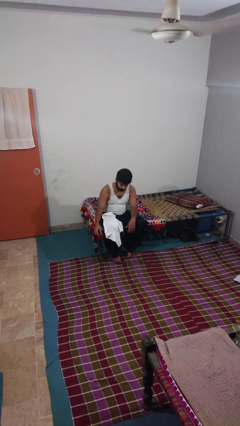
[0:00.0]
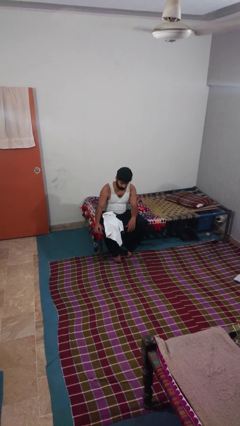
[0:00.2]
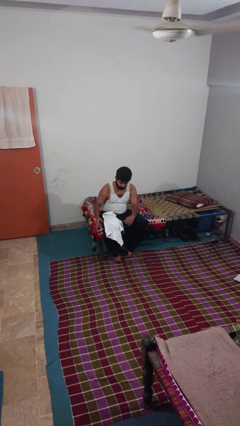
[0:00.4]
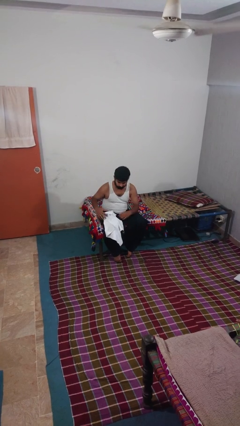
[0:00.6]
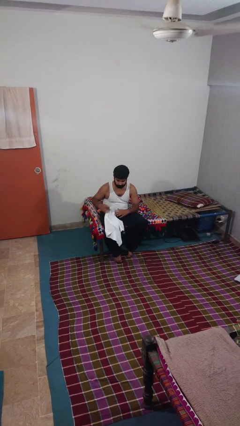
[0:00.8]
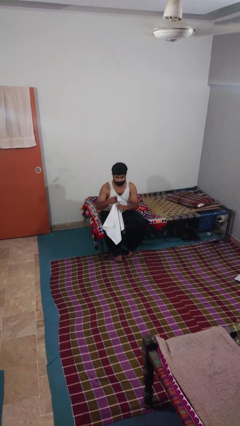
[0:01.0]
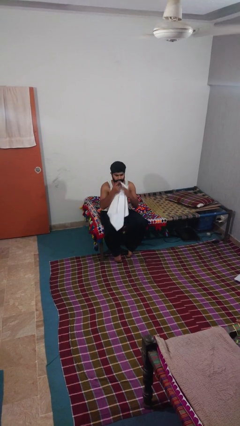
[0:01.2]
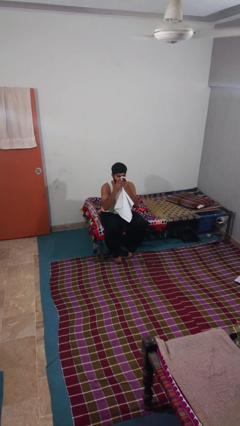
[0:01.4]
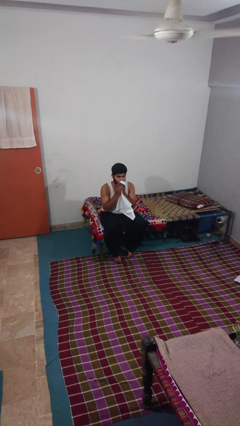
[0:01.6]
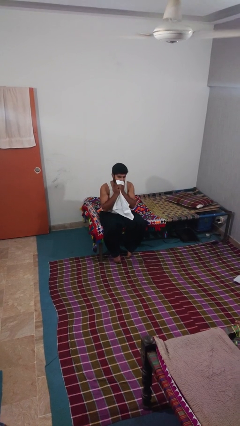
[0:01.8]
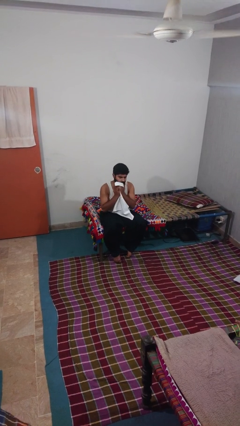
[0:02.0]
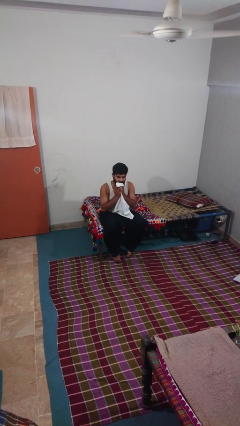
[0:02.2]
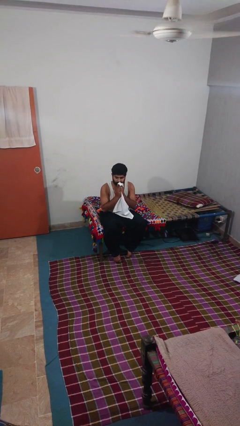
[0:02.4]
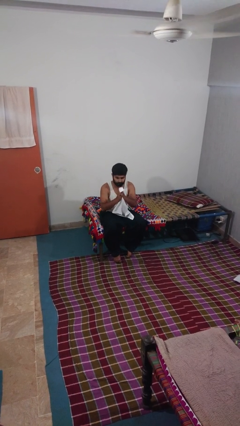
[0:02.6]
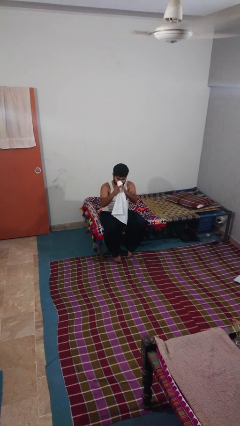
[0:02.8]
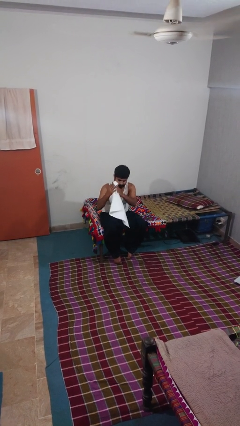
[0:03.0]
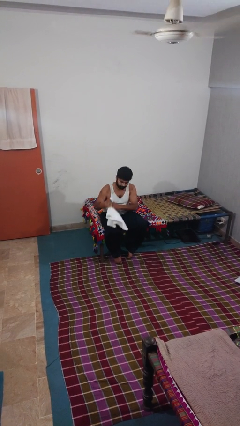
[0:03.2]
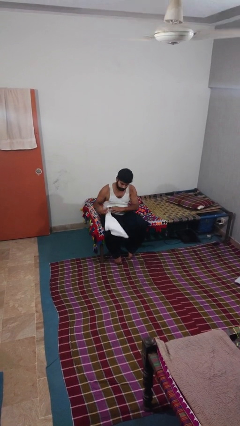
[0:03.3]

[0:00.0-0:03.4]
person wipes mouth with napkin

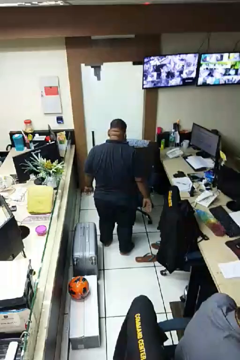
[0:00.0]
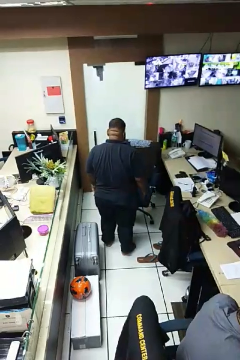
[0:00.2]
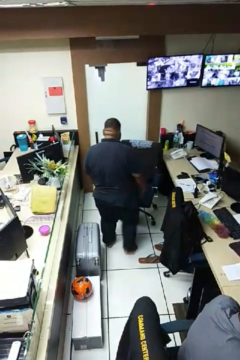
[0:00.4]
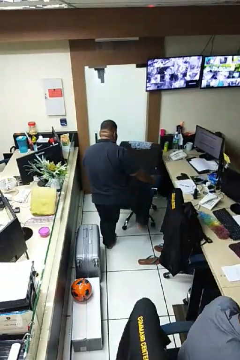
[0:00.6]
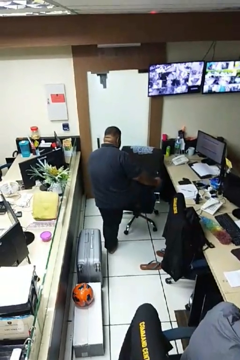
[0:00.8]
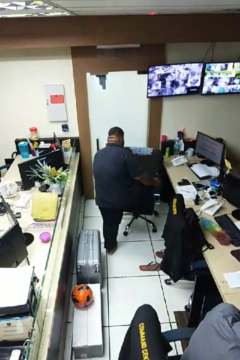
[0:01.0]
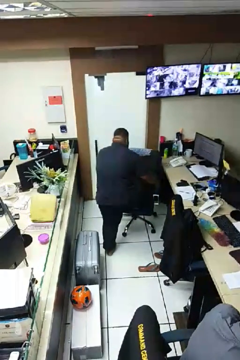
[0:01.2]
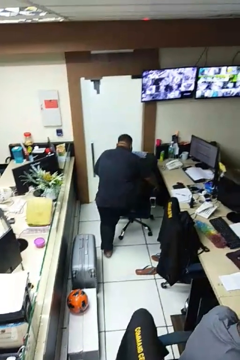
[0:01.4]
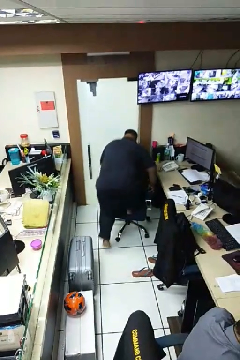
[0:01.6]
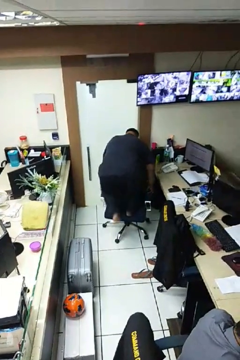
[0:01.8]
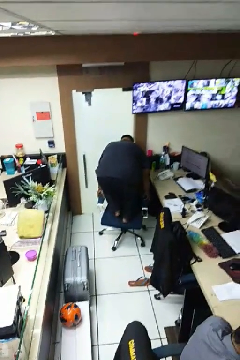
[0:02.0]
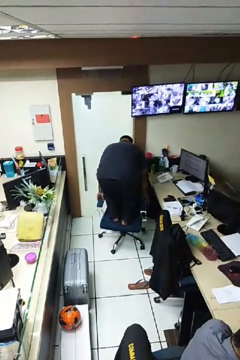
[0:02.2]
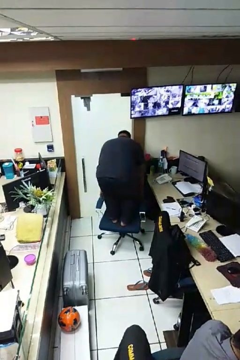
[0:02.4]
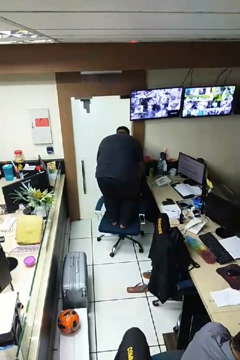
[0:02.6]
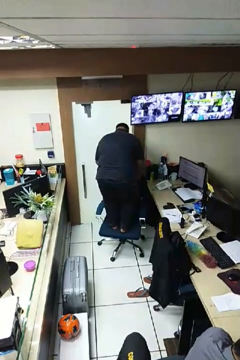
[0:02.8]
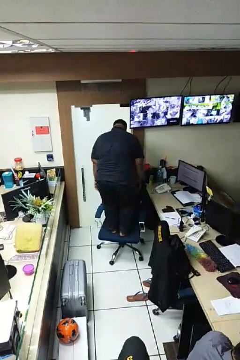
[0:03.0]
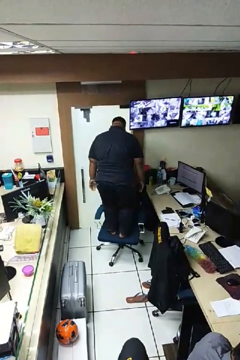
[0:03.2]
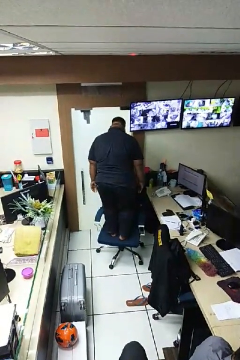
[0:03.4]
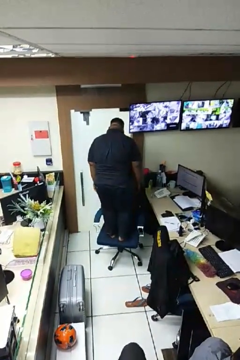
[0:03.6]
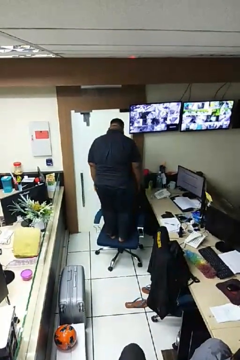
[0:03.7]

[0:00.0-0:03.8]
person climbs on chair

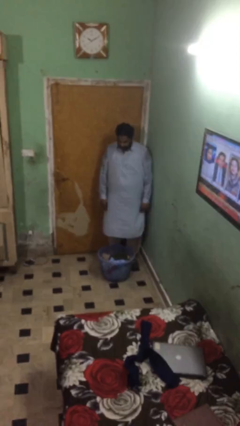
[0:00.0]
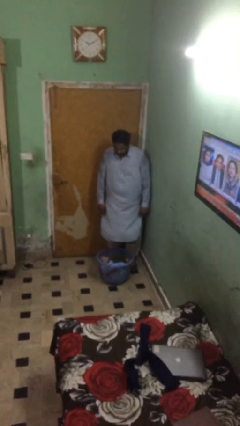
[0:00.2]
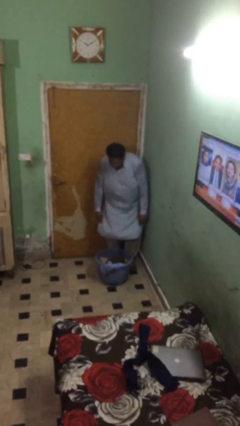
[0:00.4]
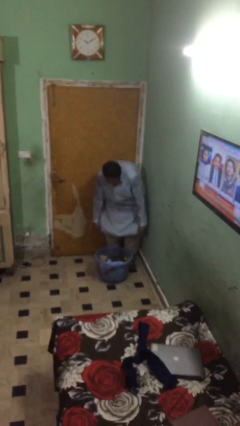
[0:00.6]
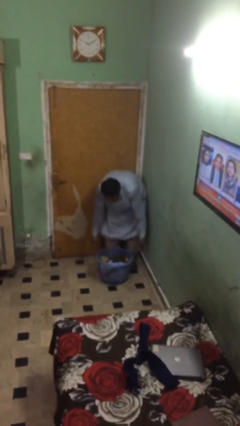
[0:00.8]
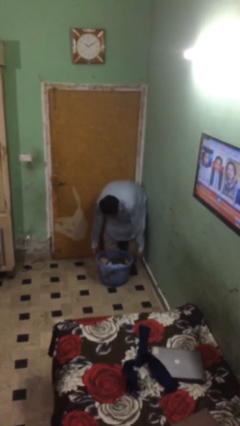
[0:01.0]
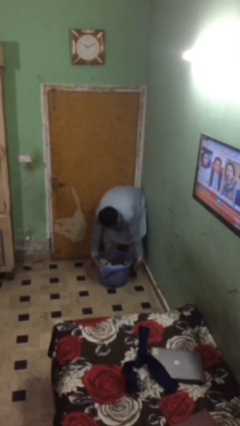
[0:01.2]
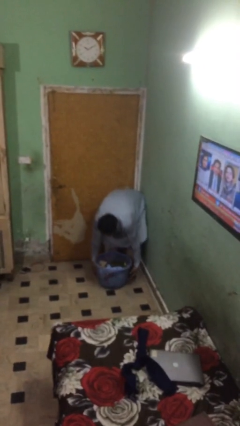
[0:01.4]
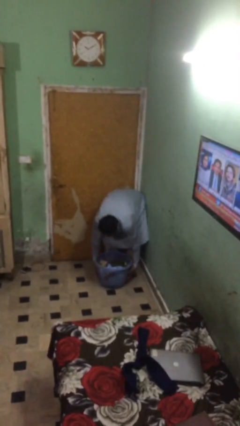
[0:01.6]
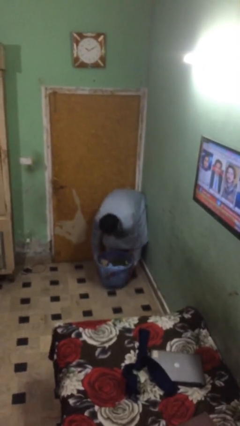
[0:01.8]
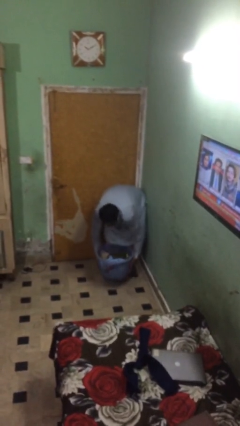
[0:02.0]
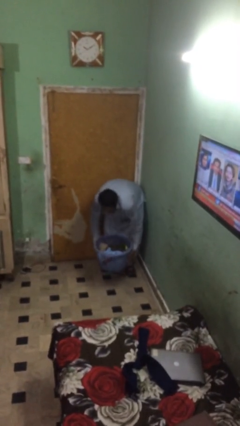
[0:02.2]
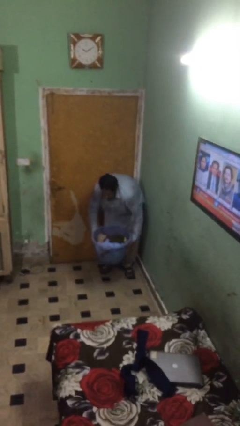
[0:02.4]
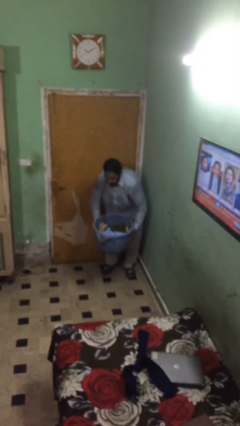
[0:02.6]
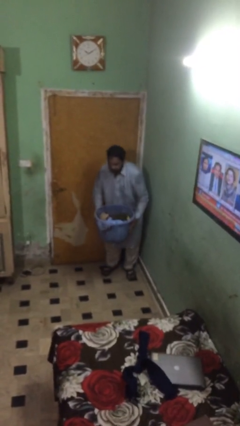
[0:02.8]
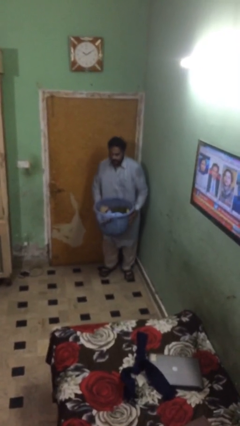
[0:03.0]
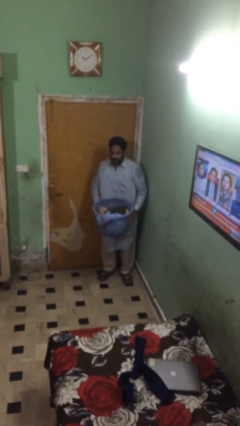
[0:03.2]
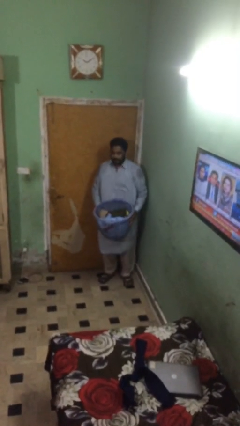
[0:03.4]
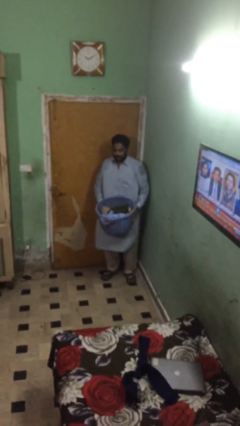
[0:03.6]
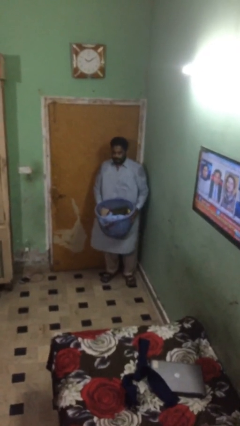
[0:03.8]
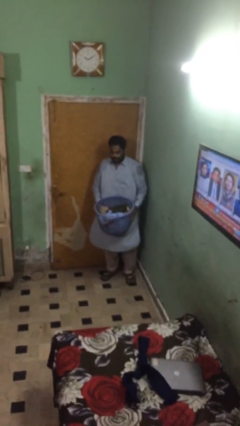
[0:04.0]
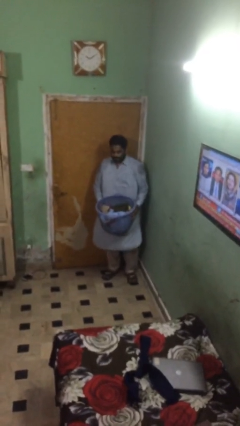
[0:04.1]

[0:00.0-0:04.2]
person picks up object from floor

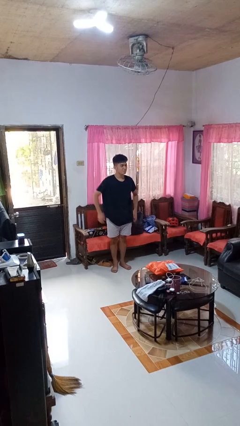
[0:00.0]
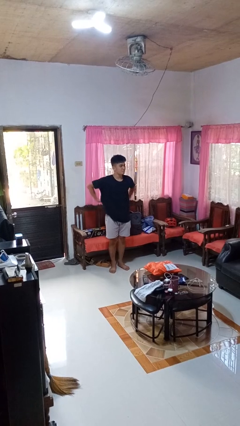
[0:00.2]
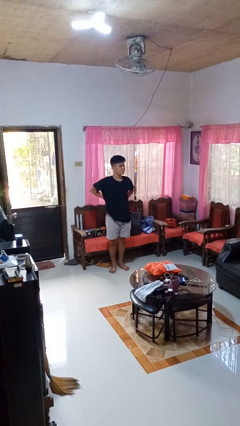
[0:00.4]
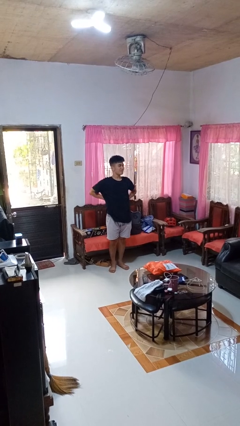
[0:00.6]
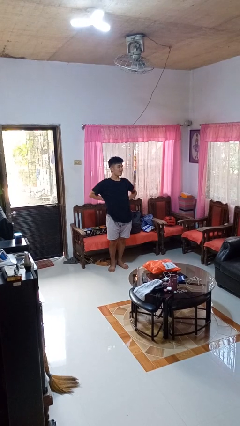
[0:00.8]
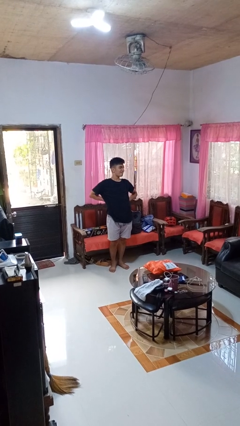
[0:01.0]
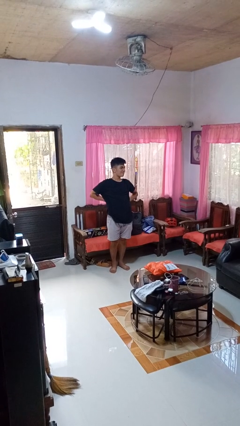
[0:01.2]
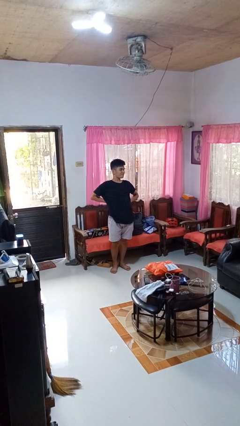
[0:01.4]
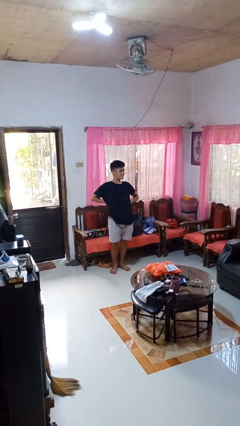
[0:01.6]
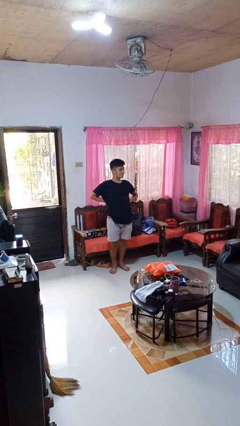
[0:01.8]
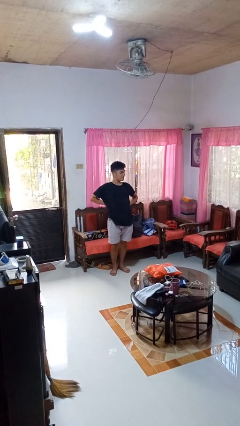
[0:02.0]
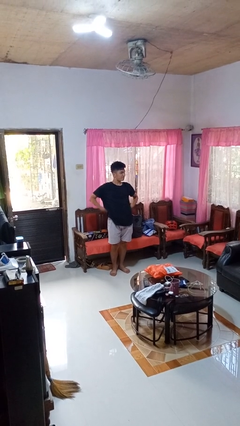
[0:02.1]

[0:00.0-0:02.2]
person stretches back

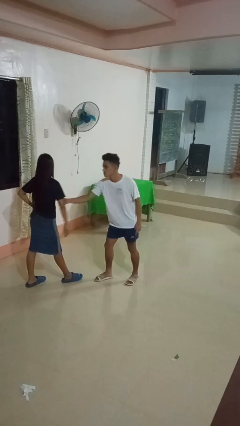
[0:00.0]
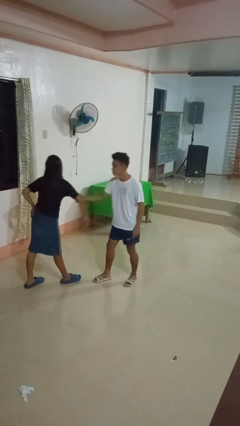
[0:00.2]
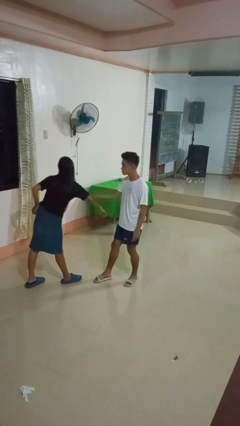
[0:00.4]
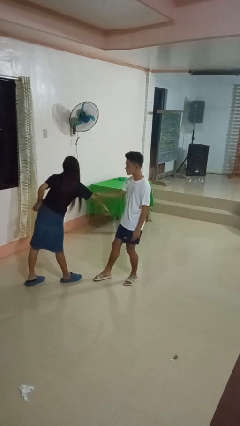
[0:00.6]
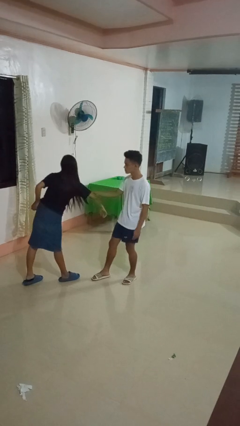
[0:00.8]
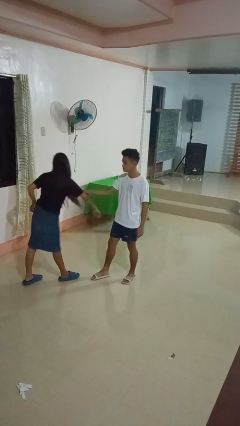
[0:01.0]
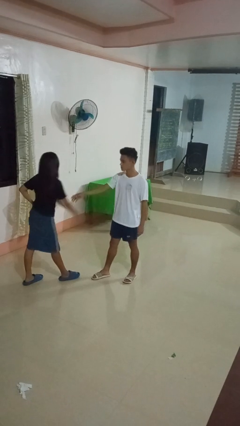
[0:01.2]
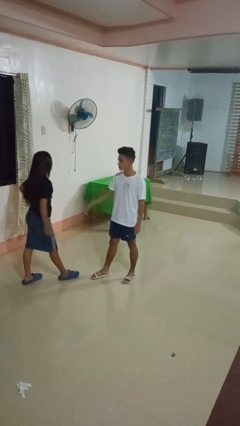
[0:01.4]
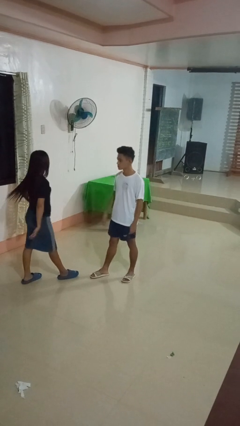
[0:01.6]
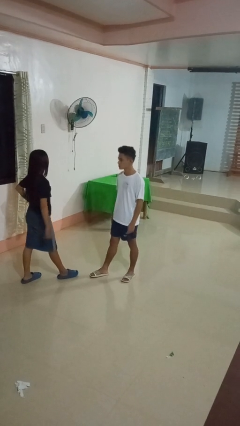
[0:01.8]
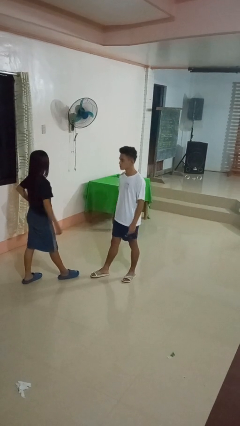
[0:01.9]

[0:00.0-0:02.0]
person grabs person by bicep

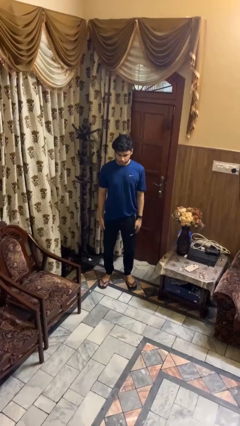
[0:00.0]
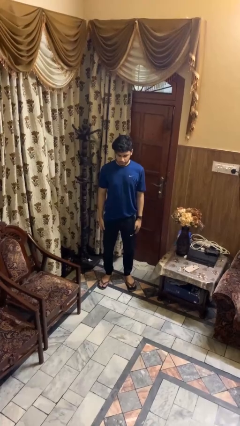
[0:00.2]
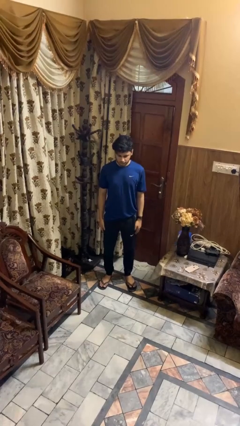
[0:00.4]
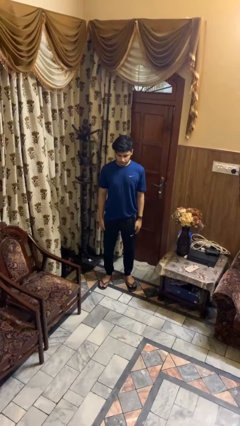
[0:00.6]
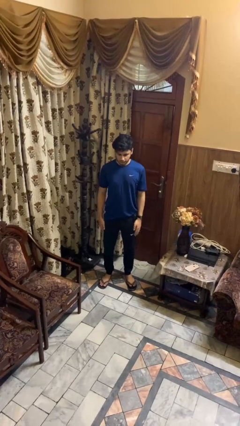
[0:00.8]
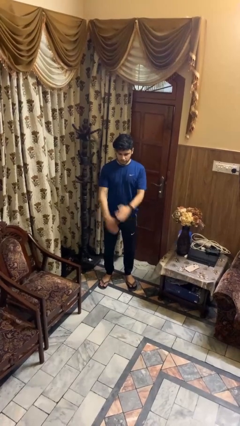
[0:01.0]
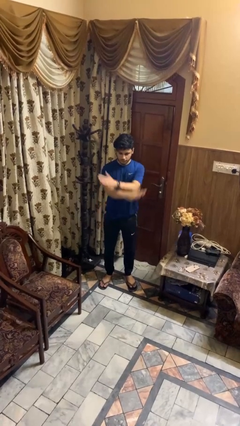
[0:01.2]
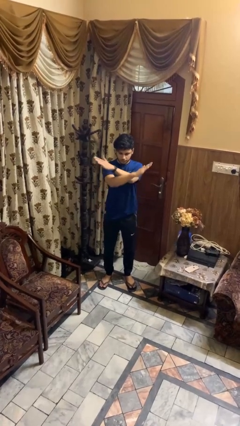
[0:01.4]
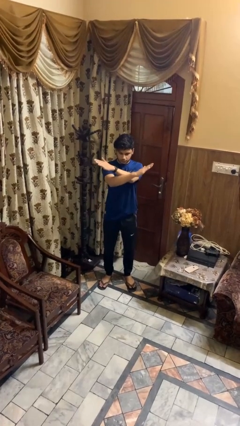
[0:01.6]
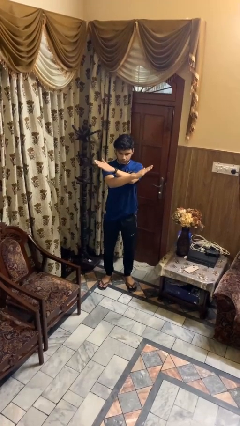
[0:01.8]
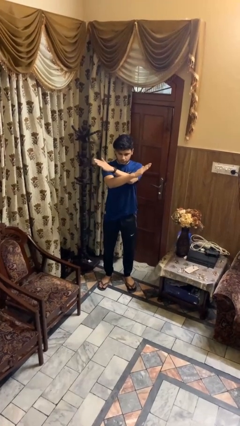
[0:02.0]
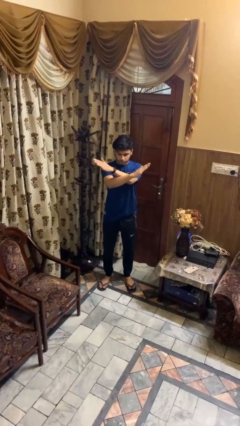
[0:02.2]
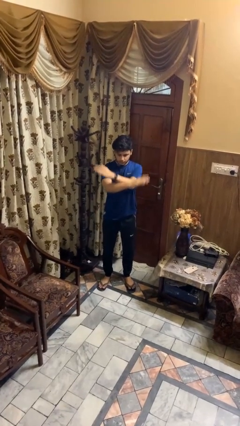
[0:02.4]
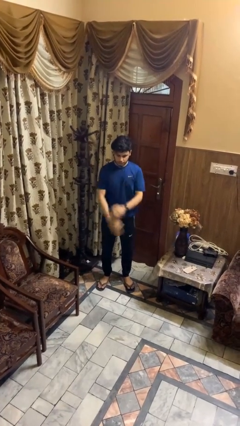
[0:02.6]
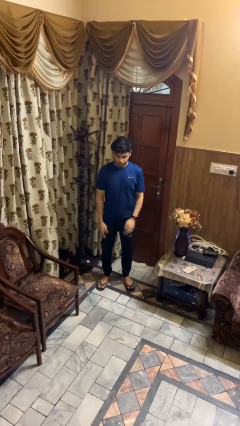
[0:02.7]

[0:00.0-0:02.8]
person gestures arms x
